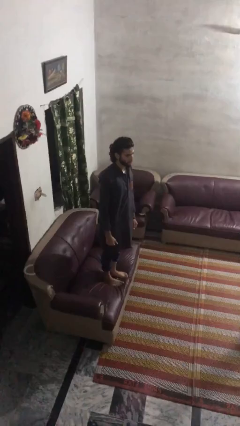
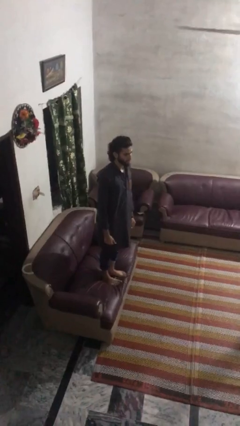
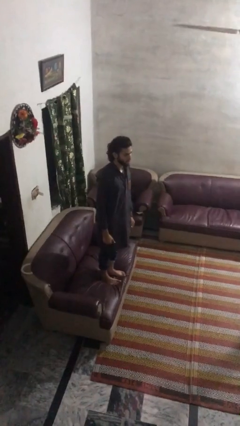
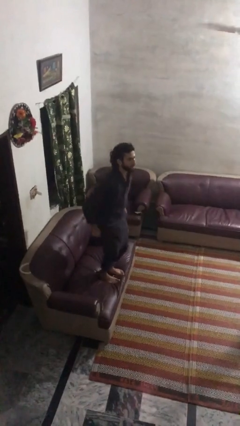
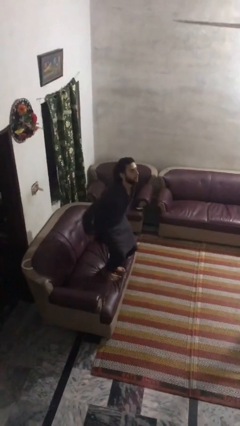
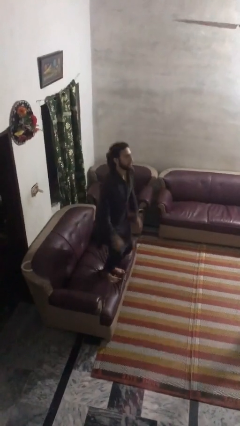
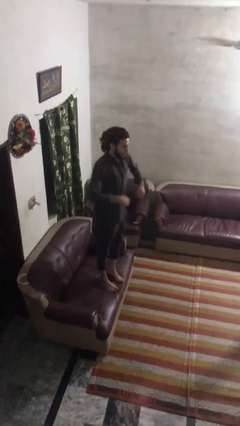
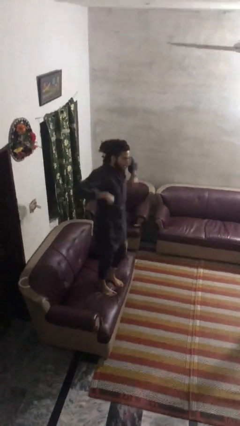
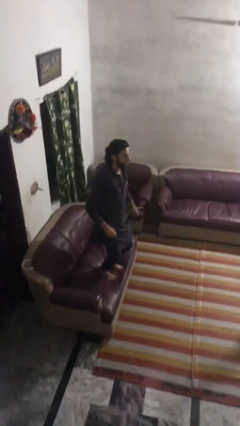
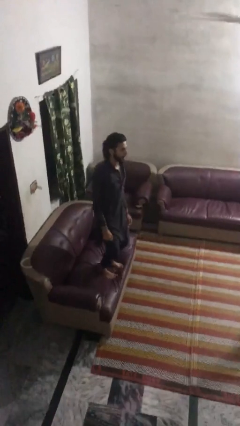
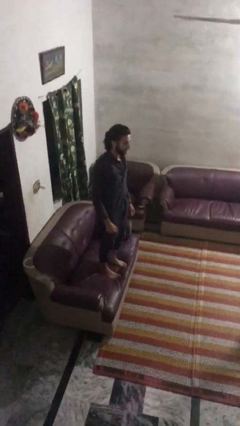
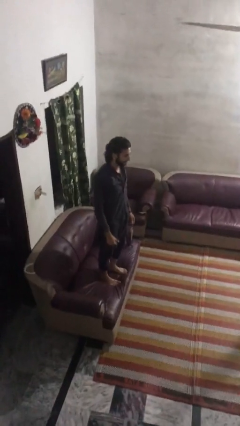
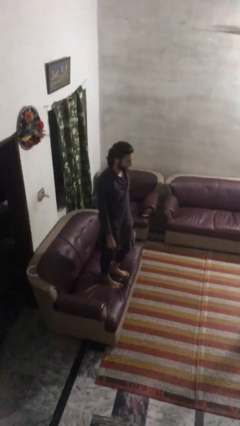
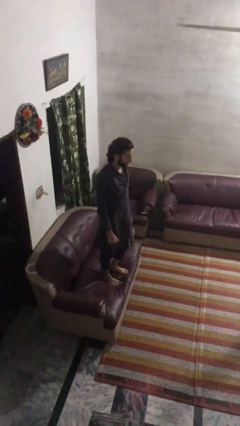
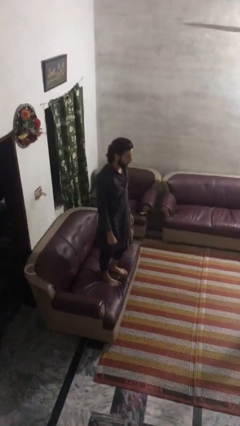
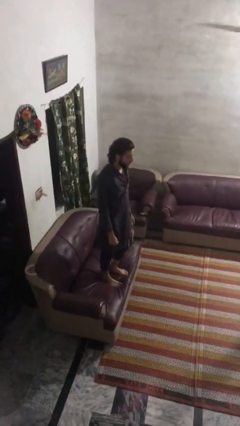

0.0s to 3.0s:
person jumps on couch

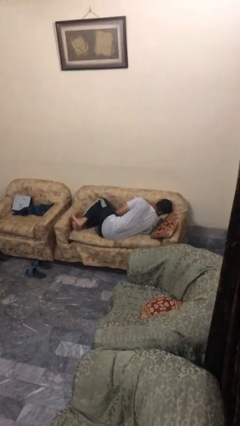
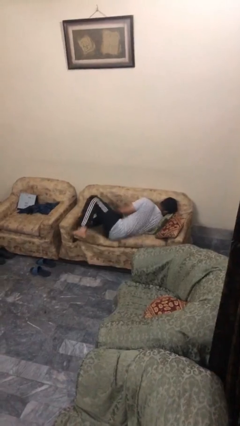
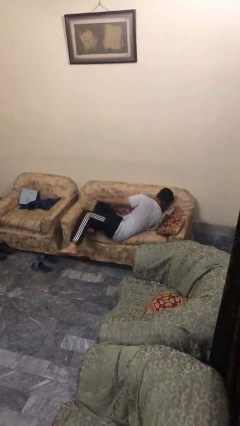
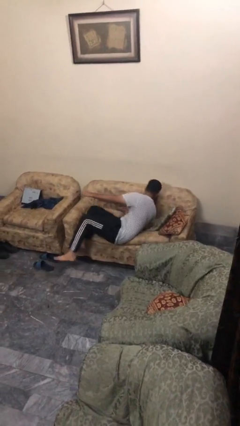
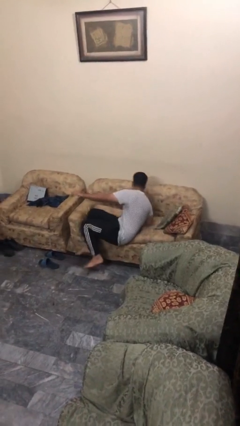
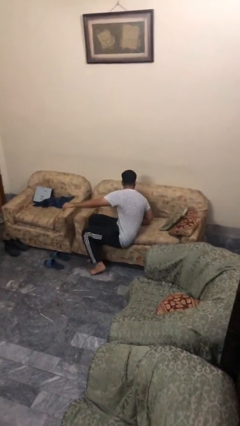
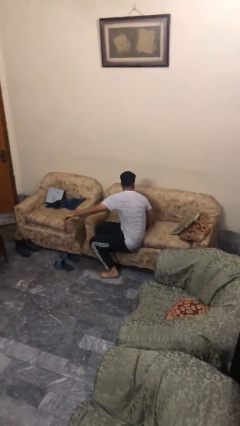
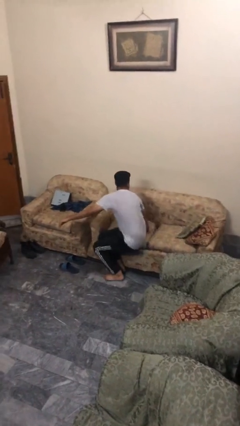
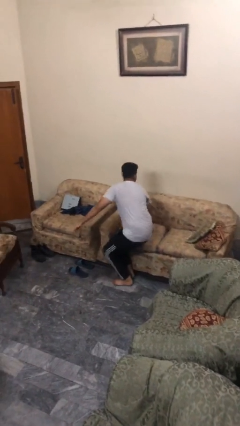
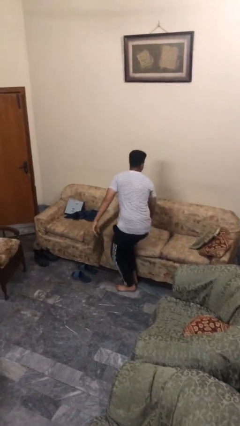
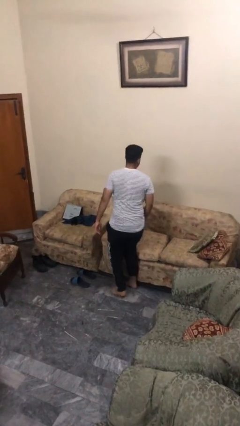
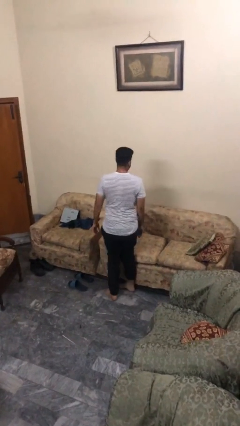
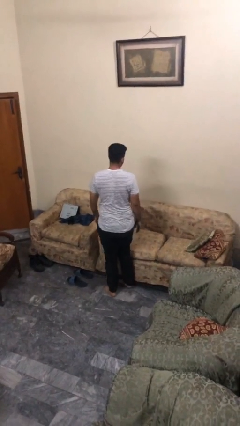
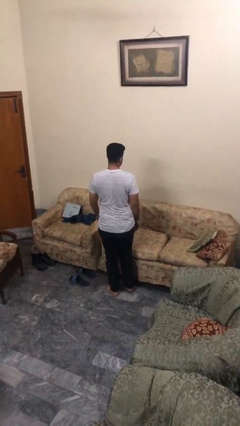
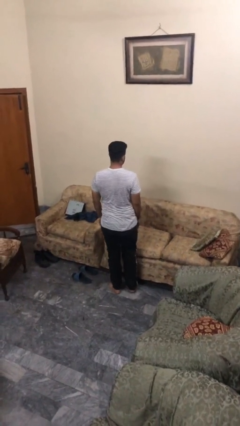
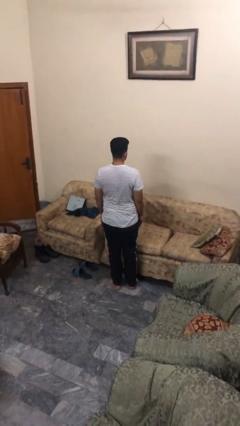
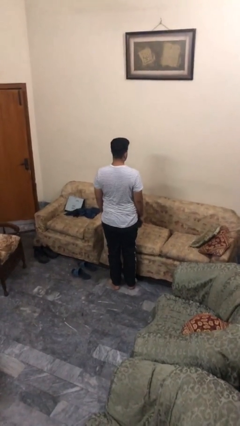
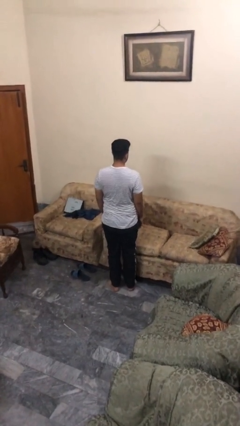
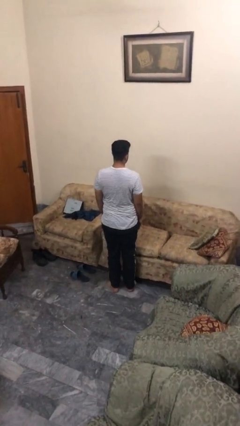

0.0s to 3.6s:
person stands up

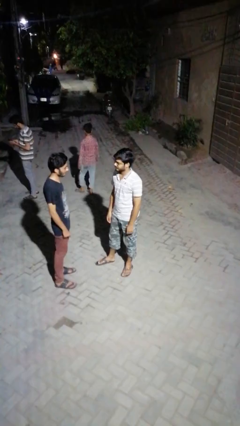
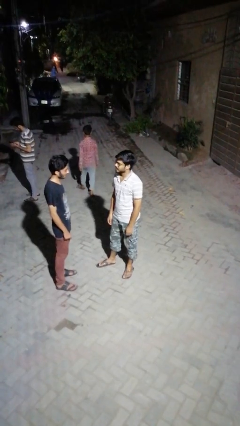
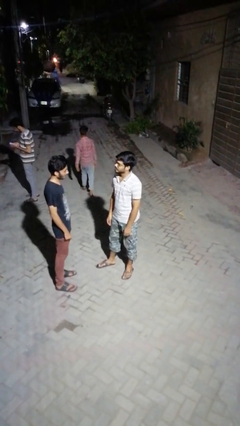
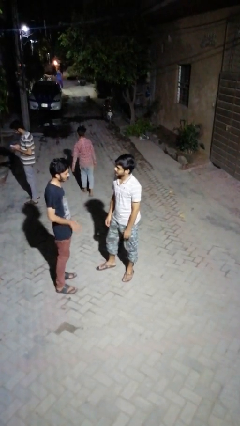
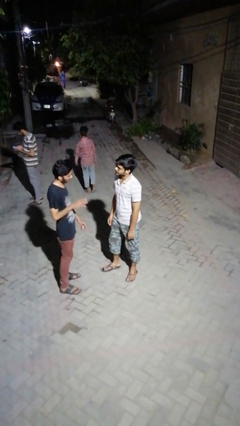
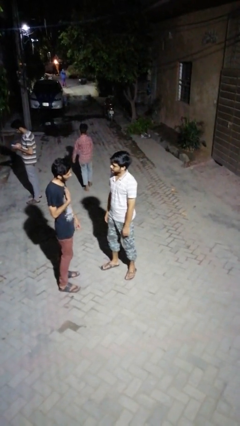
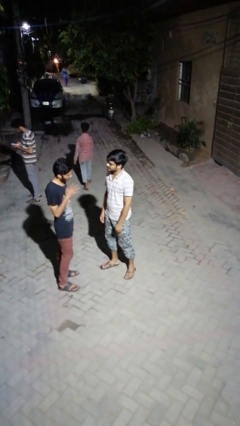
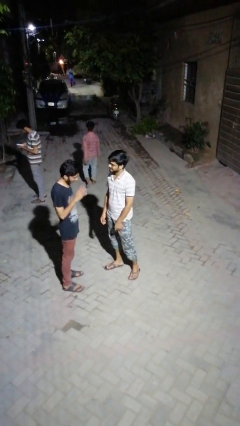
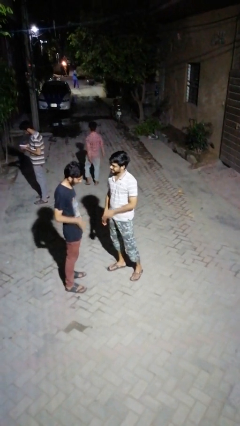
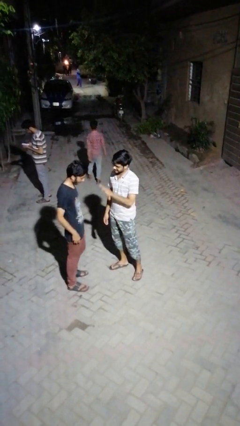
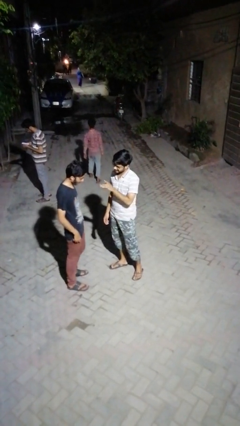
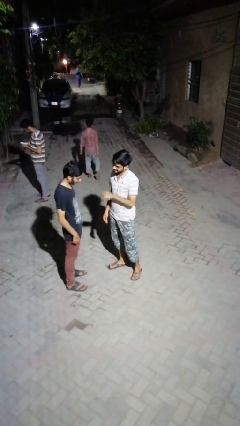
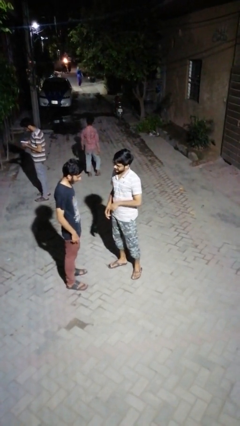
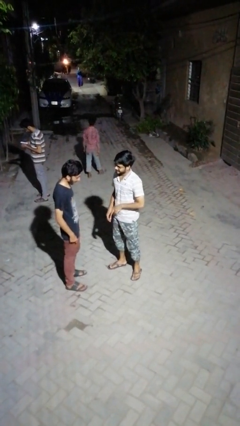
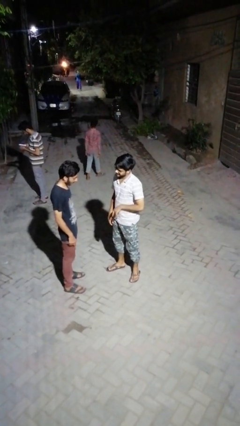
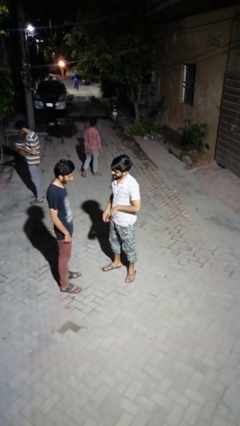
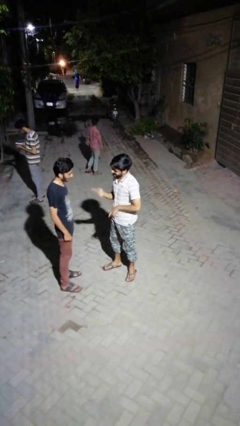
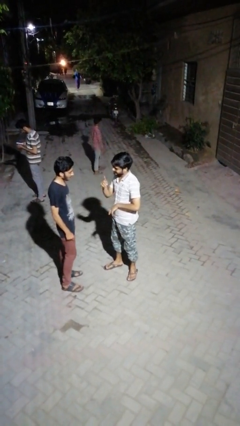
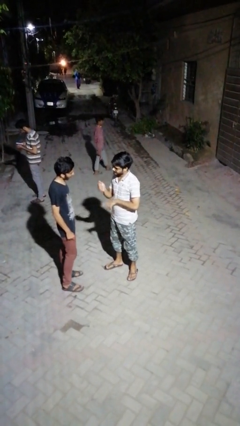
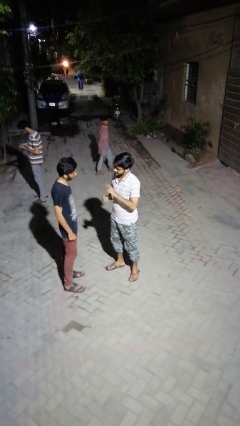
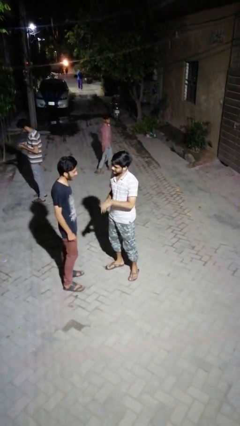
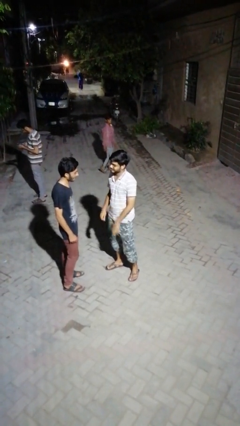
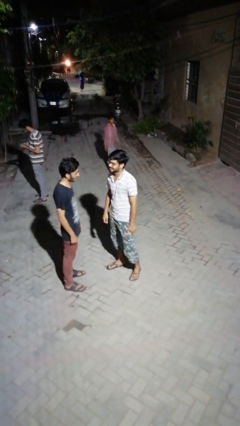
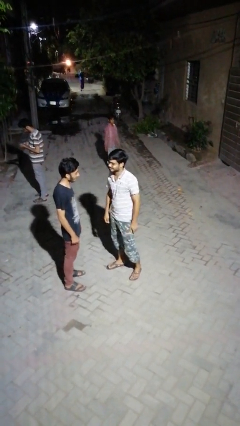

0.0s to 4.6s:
person talks to person

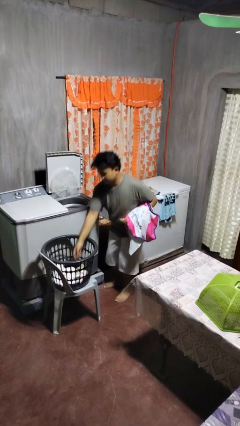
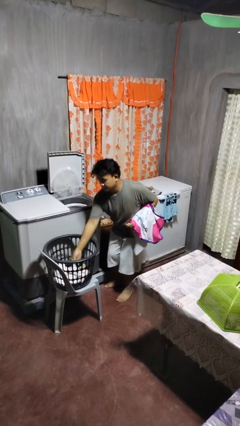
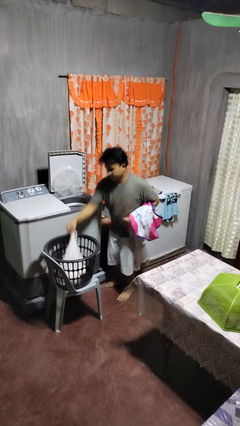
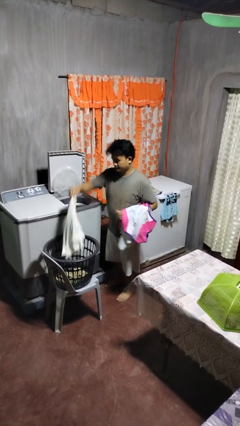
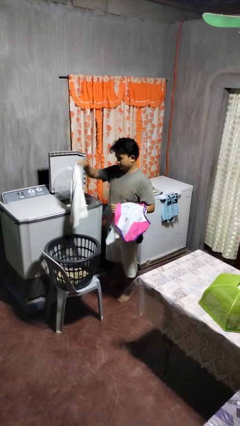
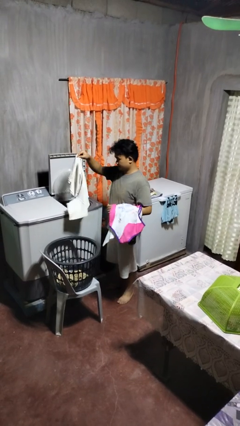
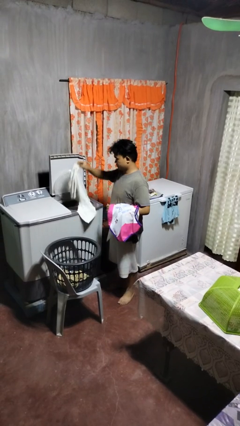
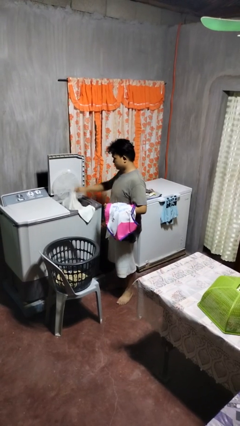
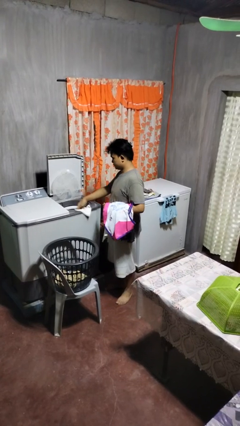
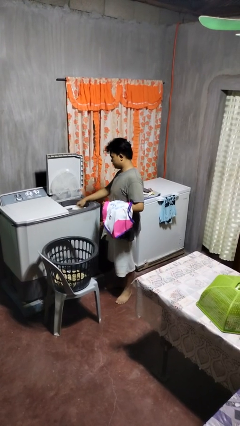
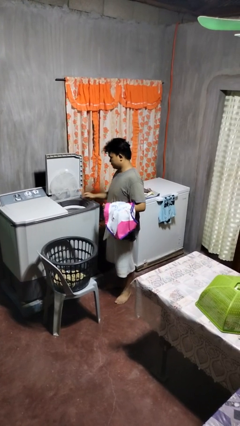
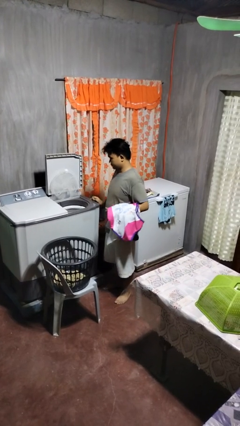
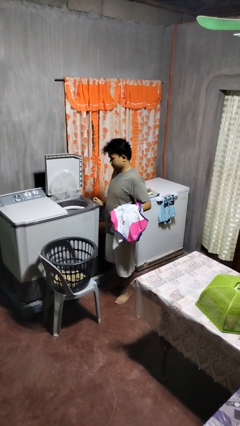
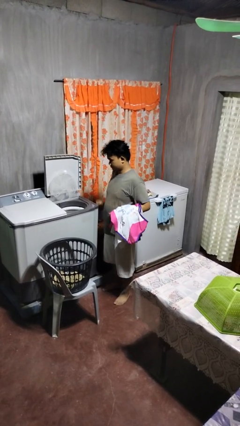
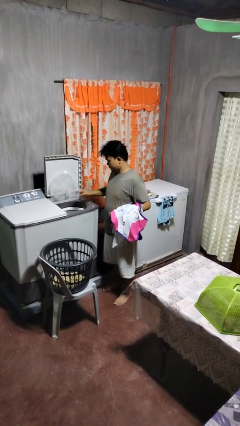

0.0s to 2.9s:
person loads dryer

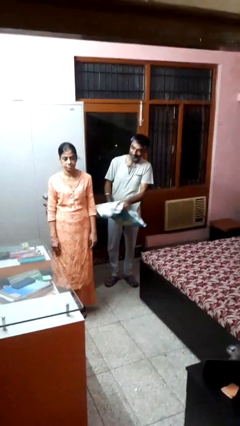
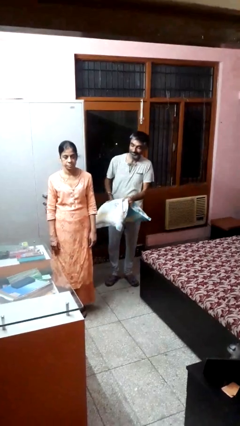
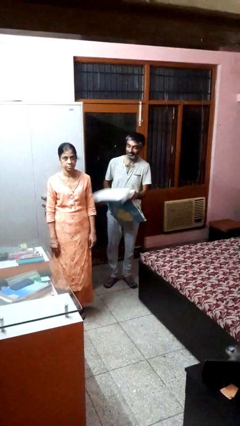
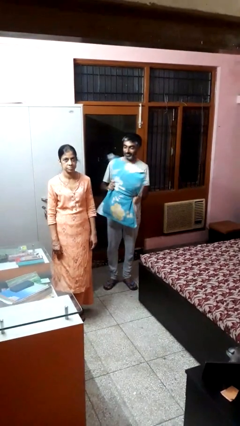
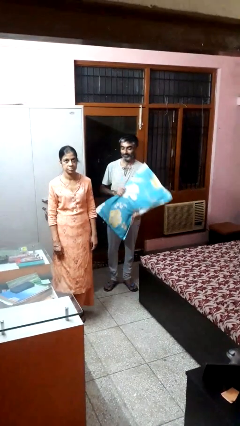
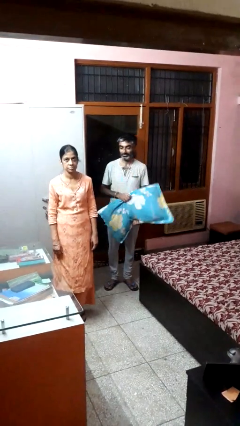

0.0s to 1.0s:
person hits person with pillow

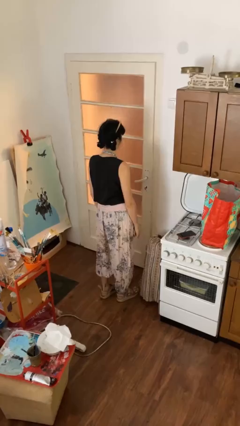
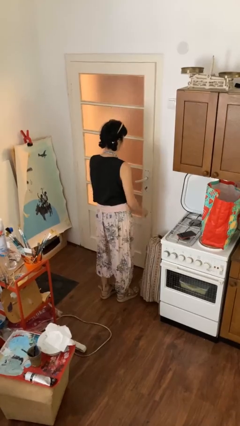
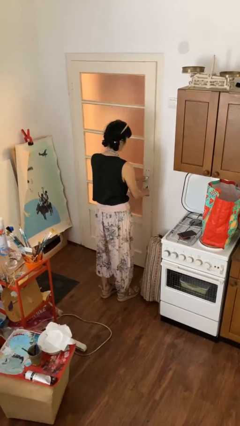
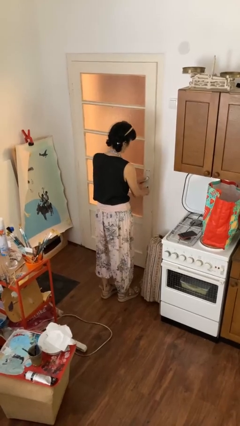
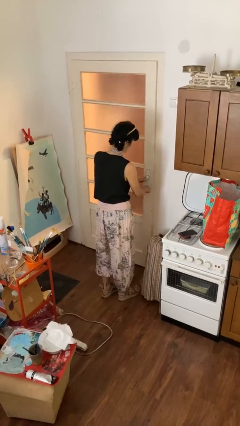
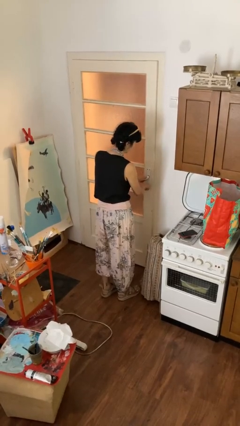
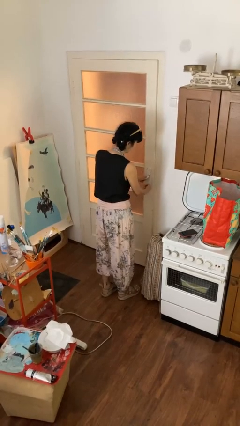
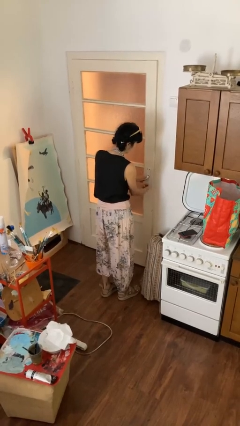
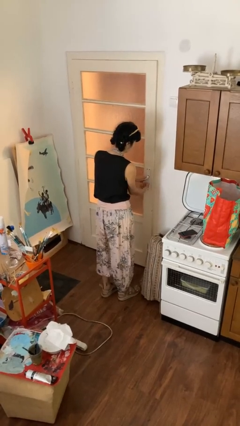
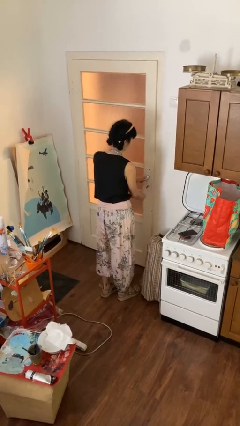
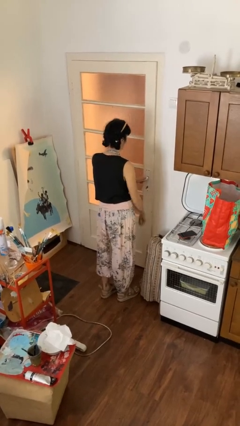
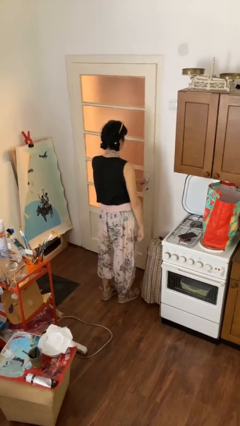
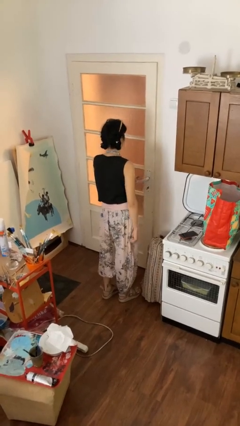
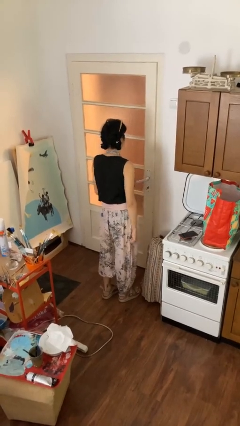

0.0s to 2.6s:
person locks door with keys
